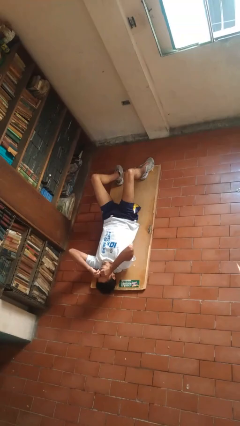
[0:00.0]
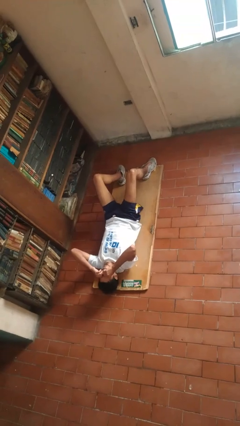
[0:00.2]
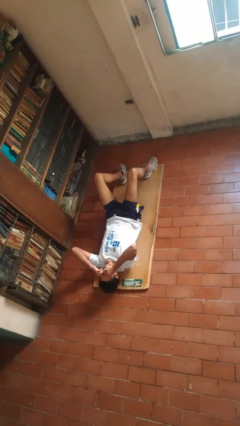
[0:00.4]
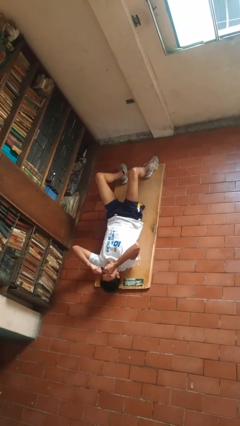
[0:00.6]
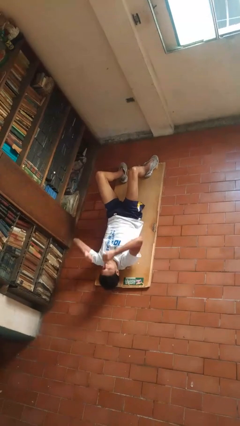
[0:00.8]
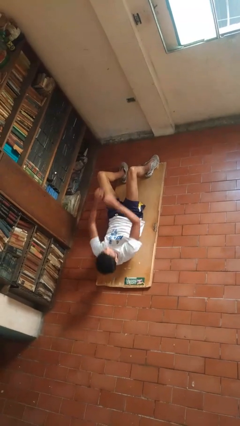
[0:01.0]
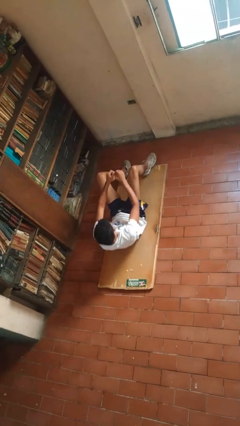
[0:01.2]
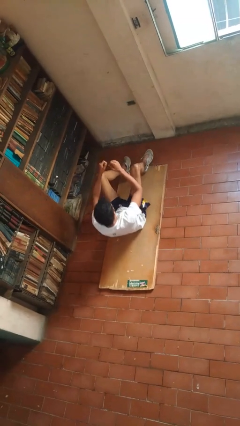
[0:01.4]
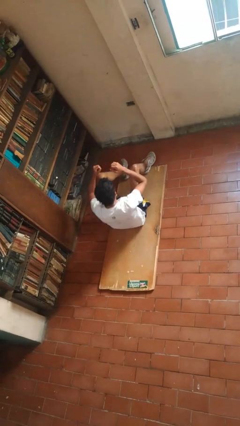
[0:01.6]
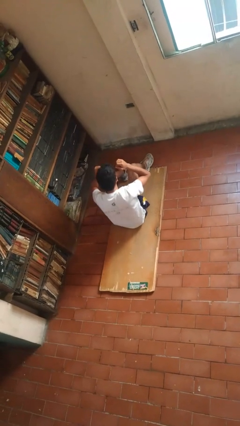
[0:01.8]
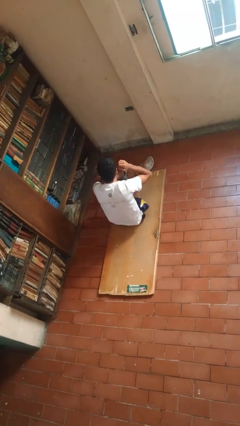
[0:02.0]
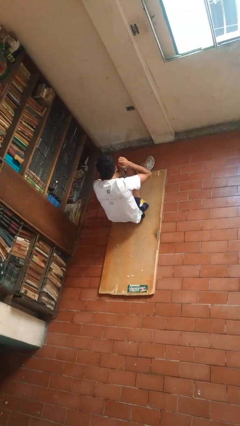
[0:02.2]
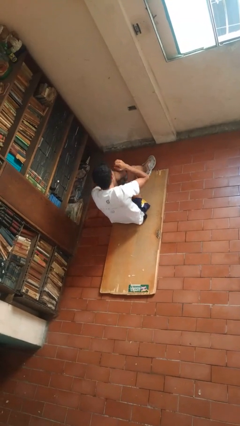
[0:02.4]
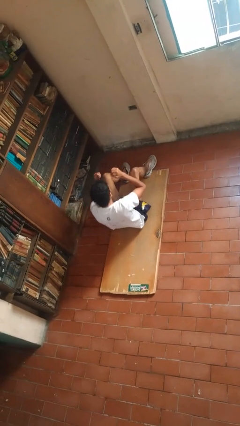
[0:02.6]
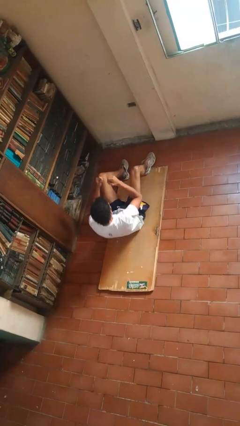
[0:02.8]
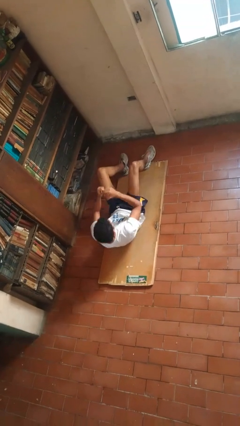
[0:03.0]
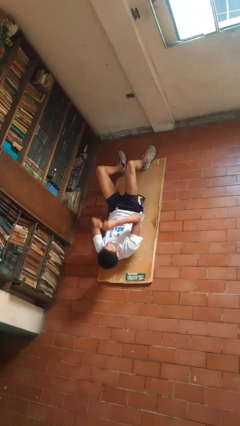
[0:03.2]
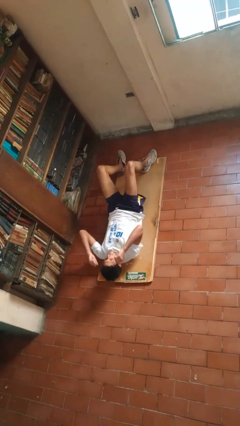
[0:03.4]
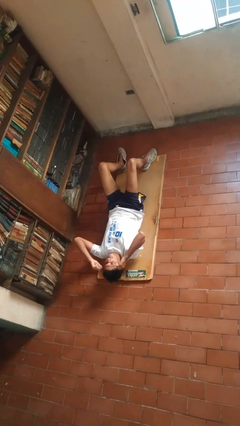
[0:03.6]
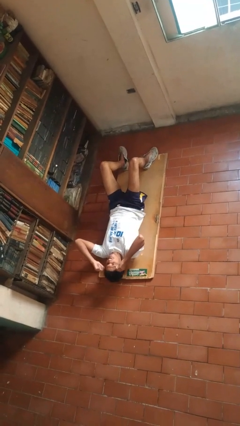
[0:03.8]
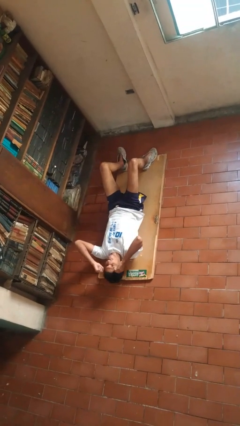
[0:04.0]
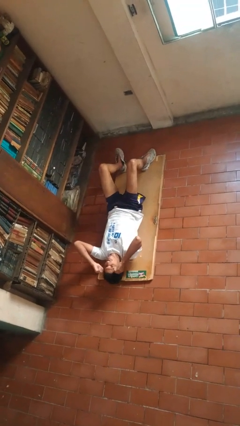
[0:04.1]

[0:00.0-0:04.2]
person exercises with situp

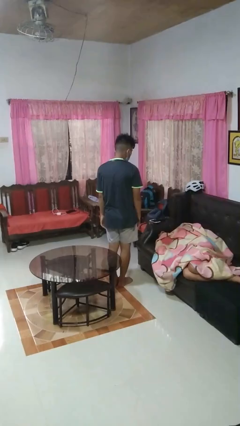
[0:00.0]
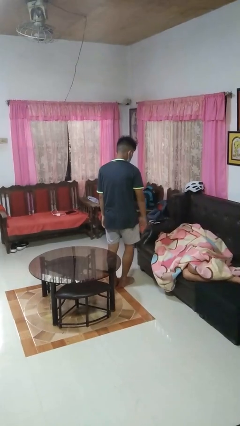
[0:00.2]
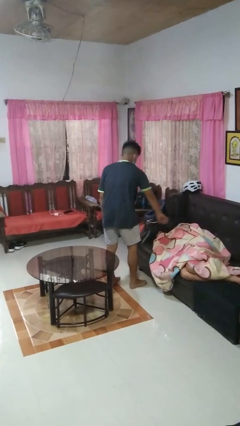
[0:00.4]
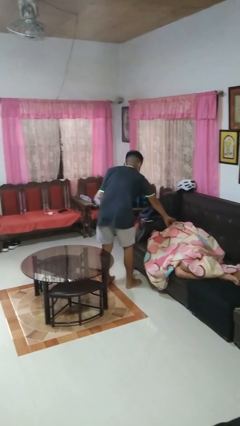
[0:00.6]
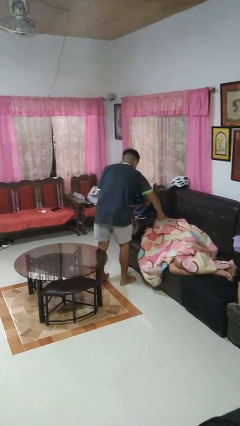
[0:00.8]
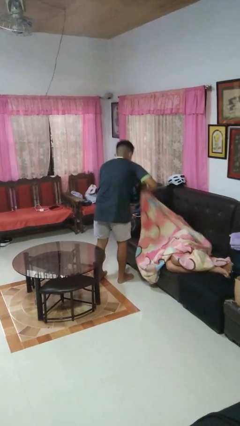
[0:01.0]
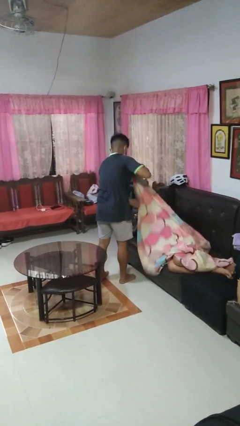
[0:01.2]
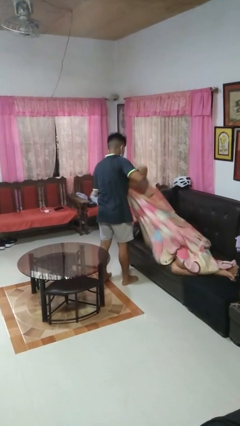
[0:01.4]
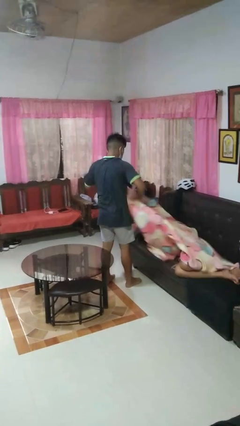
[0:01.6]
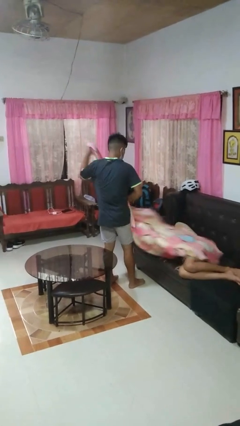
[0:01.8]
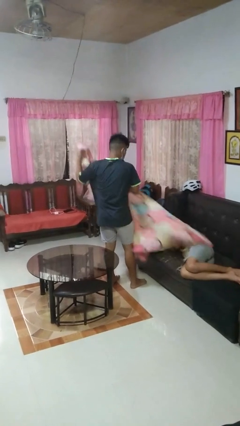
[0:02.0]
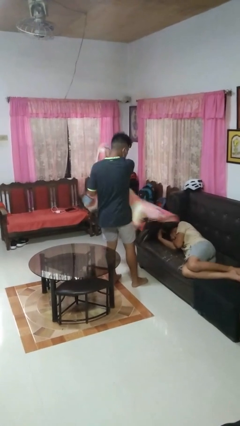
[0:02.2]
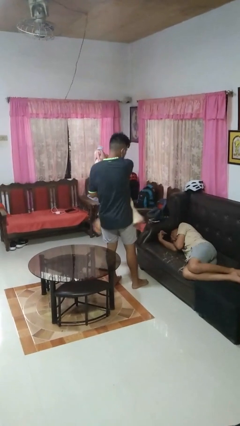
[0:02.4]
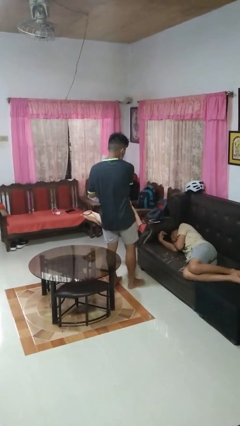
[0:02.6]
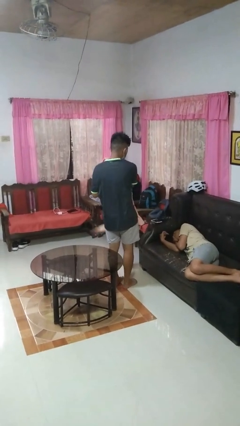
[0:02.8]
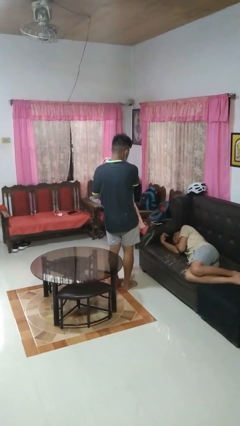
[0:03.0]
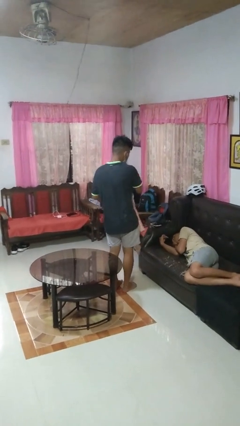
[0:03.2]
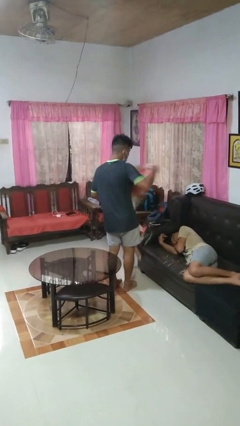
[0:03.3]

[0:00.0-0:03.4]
person uncovers friend with blanket

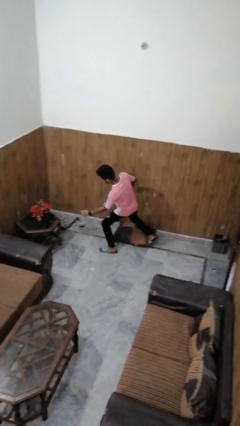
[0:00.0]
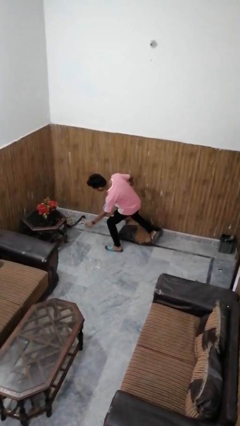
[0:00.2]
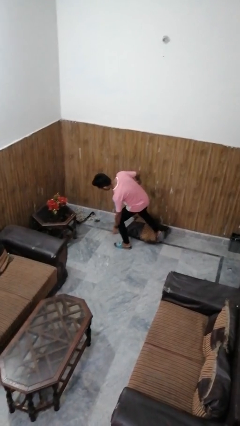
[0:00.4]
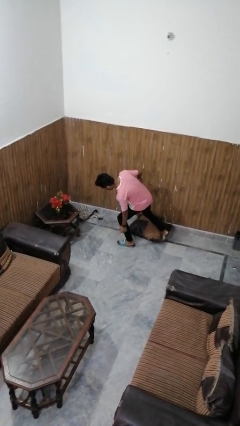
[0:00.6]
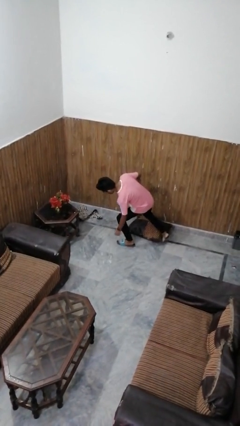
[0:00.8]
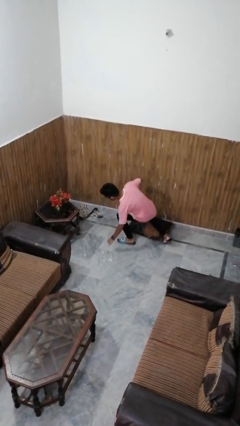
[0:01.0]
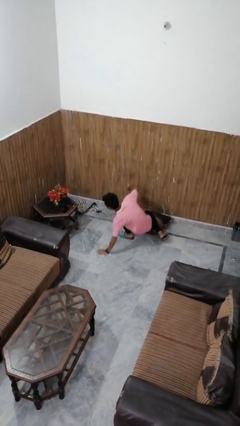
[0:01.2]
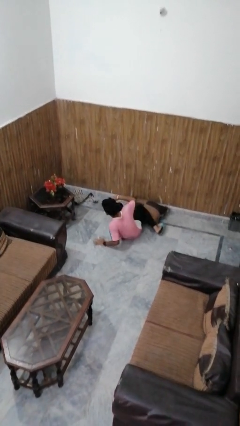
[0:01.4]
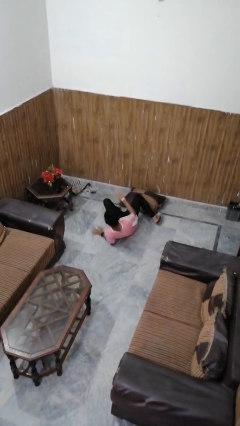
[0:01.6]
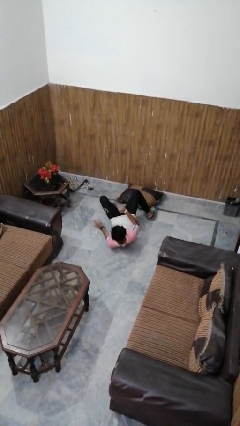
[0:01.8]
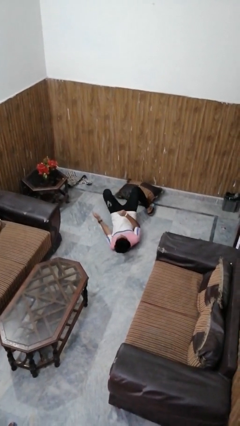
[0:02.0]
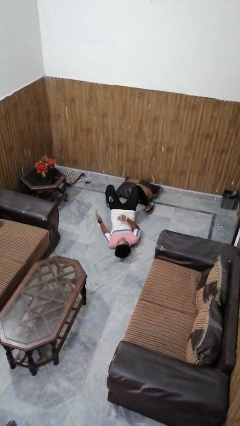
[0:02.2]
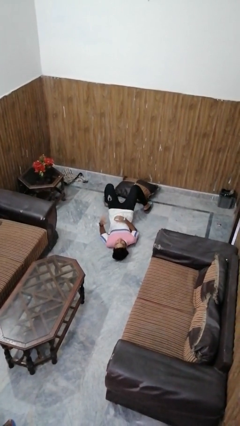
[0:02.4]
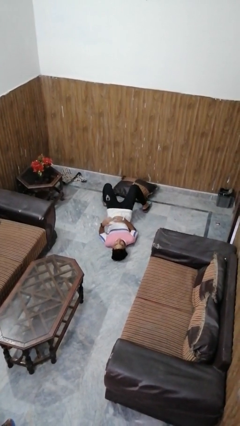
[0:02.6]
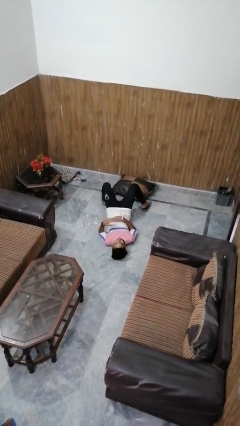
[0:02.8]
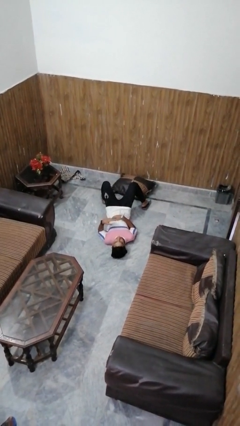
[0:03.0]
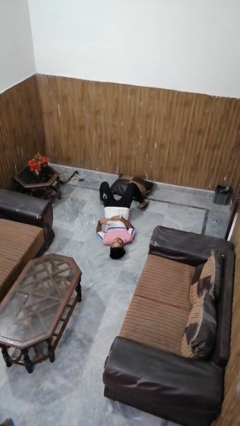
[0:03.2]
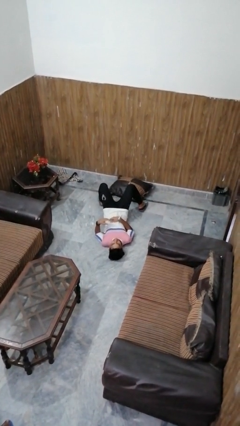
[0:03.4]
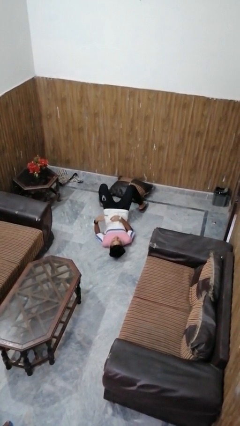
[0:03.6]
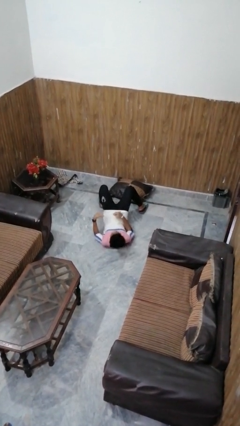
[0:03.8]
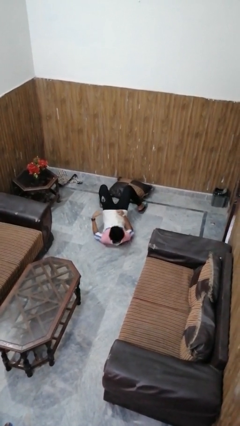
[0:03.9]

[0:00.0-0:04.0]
person lies down on floor

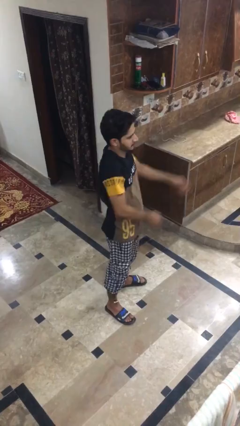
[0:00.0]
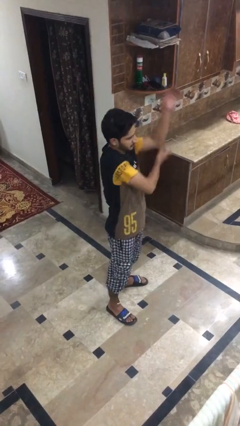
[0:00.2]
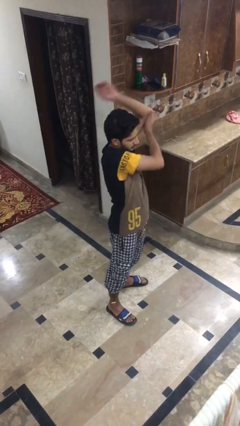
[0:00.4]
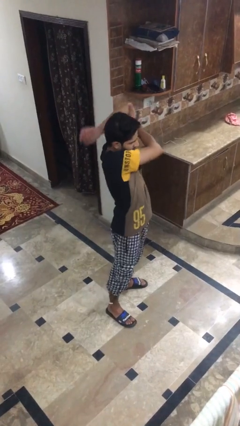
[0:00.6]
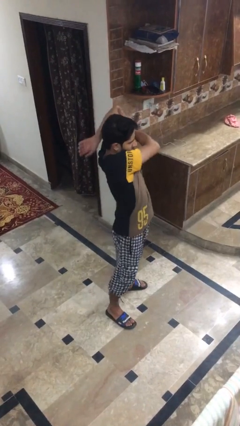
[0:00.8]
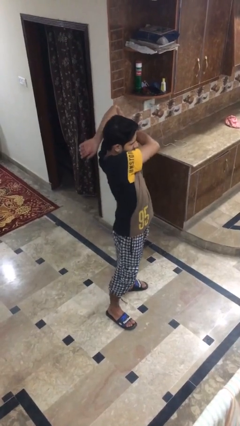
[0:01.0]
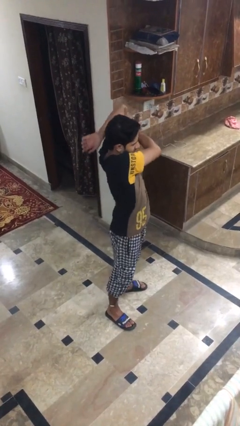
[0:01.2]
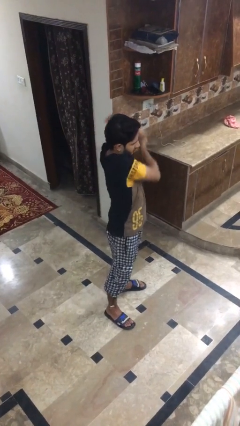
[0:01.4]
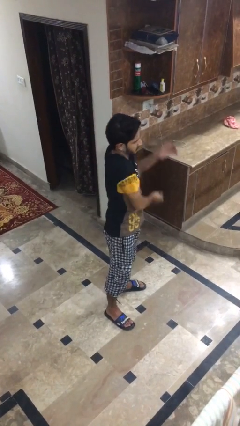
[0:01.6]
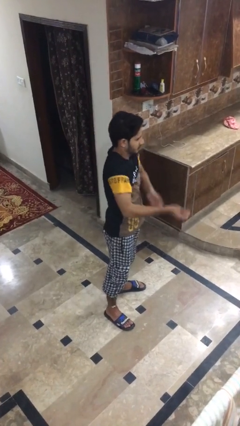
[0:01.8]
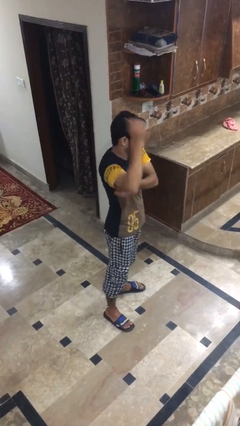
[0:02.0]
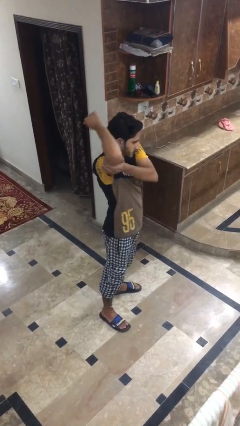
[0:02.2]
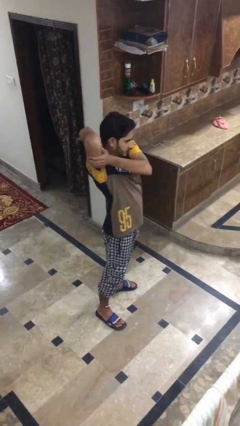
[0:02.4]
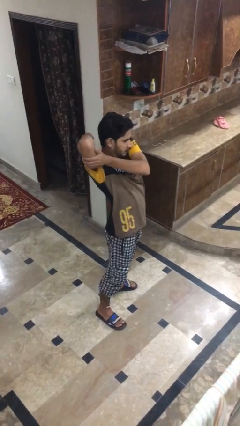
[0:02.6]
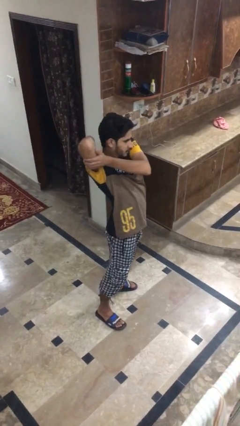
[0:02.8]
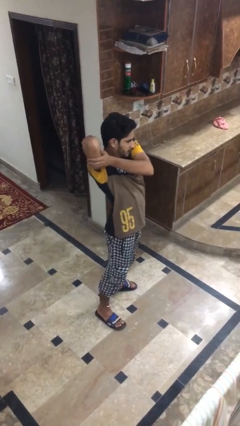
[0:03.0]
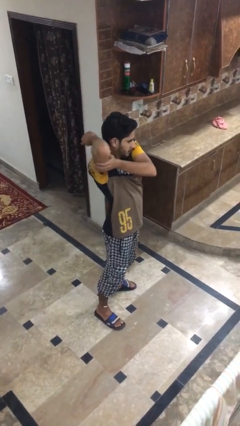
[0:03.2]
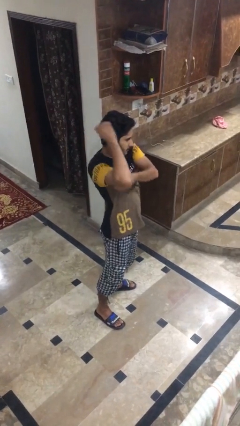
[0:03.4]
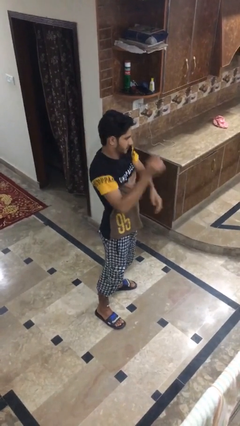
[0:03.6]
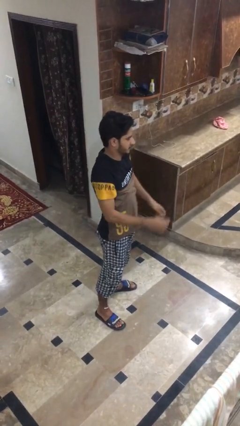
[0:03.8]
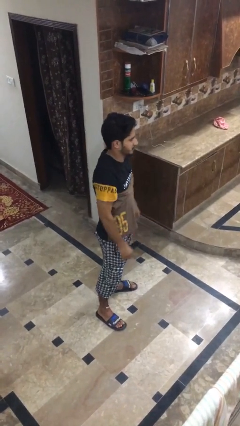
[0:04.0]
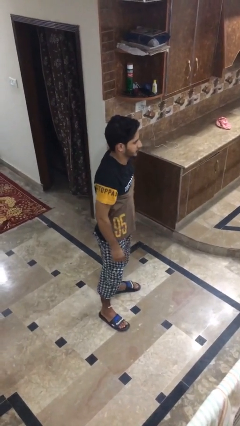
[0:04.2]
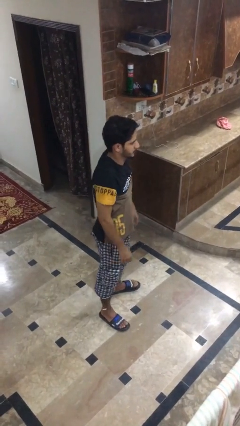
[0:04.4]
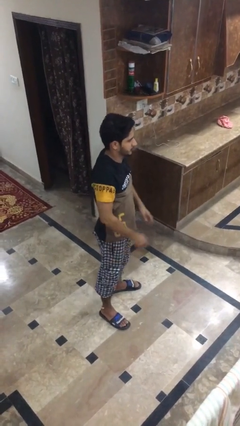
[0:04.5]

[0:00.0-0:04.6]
person stretches arms to side

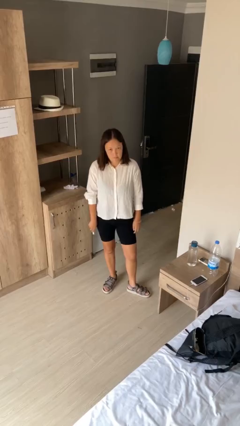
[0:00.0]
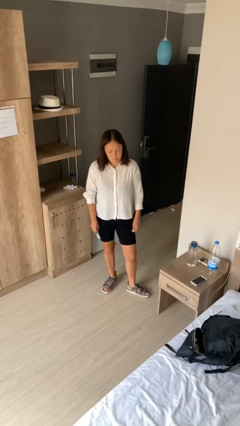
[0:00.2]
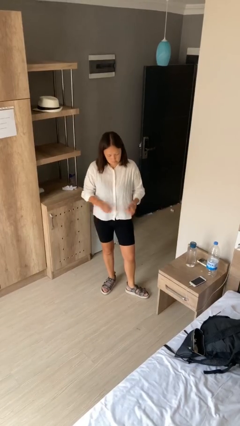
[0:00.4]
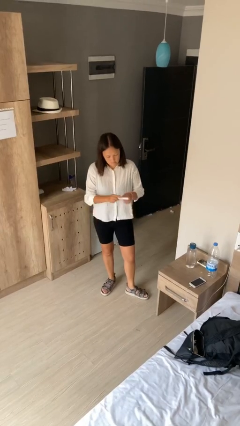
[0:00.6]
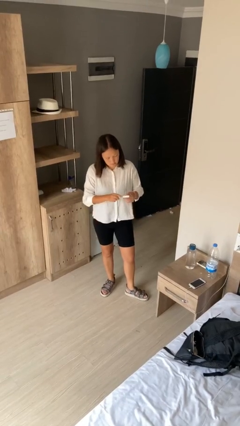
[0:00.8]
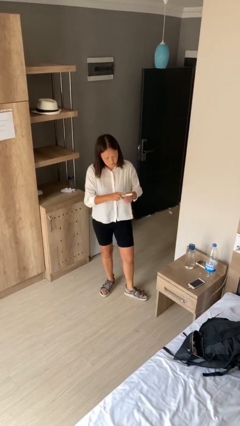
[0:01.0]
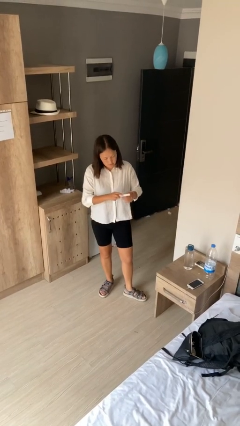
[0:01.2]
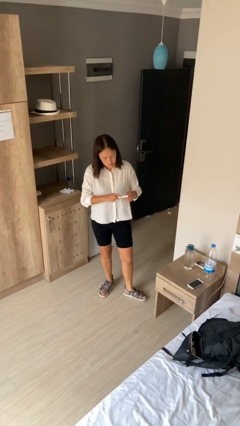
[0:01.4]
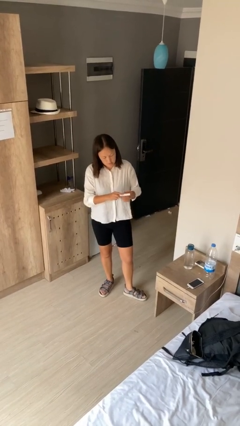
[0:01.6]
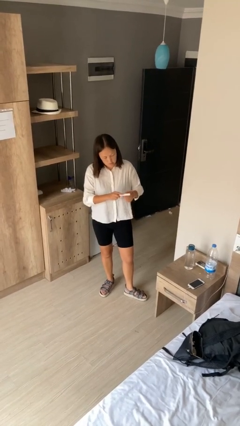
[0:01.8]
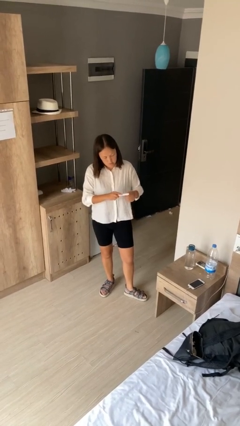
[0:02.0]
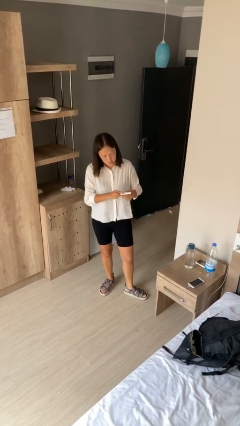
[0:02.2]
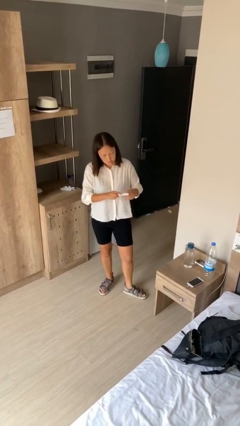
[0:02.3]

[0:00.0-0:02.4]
person files fingernails
